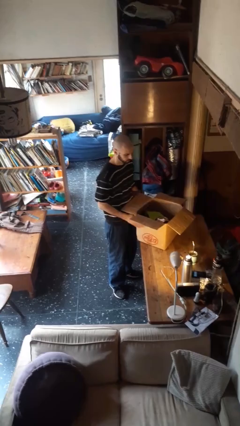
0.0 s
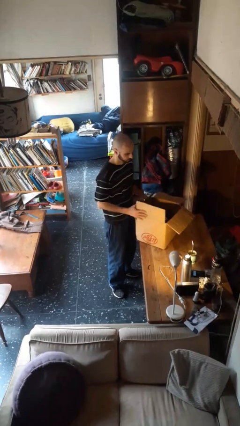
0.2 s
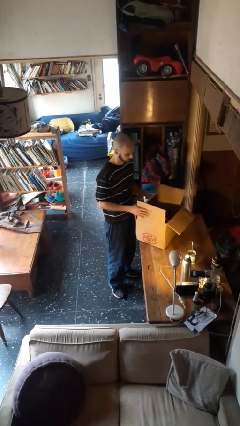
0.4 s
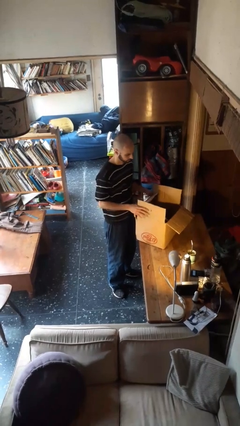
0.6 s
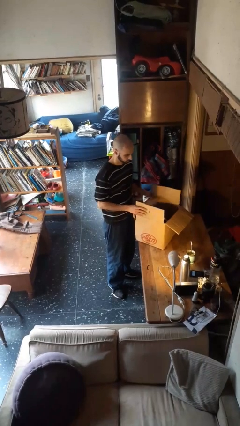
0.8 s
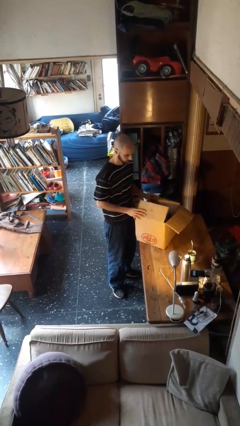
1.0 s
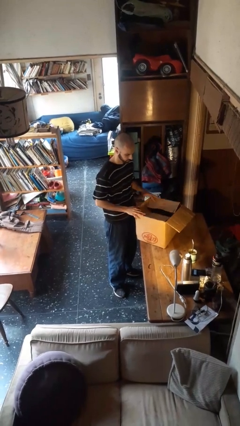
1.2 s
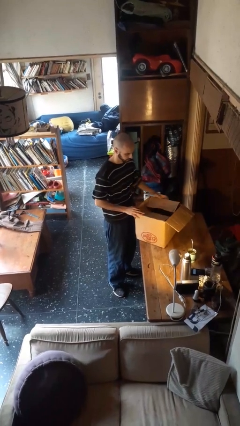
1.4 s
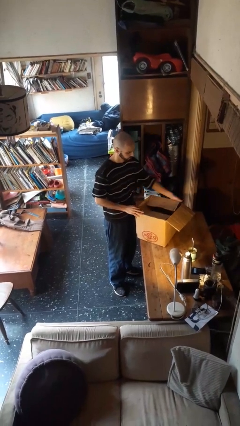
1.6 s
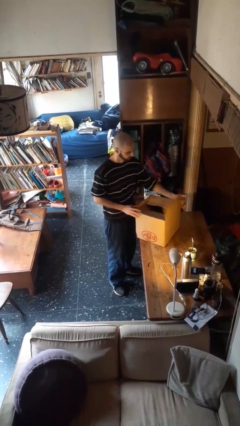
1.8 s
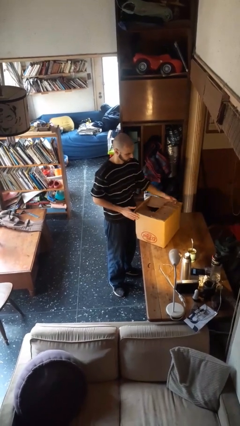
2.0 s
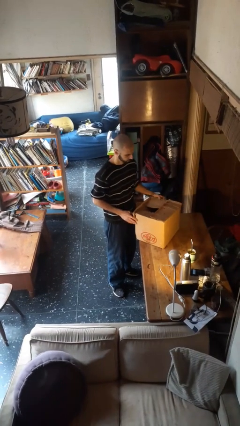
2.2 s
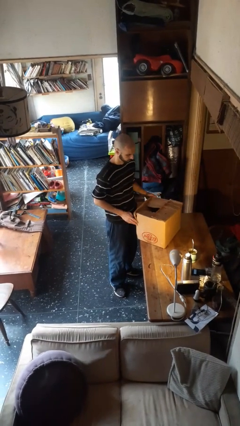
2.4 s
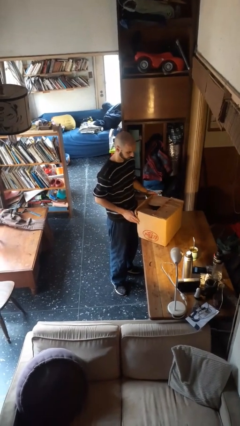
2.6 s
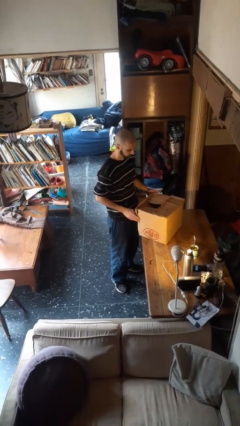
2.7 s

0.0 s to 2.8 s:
person closes box

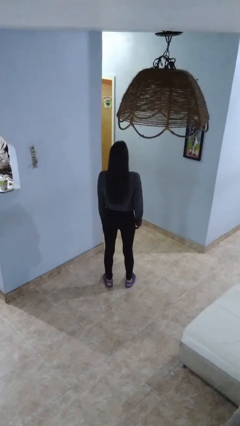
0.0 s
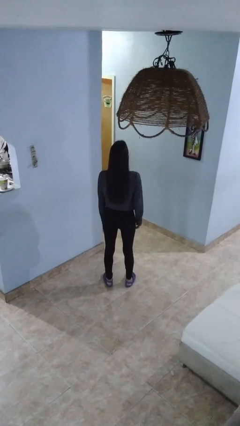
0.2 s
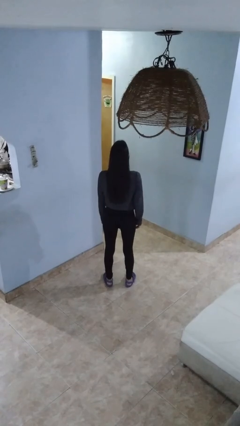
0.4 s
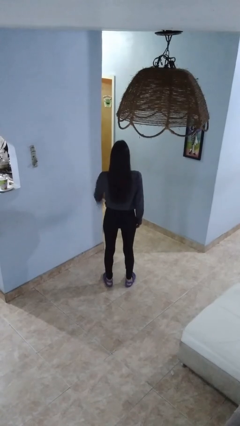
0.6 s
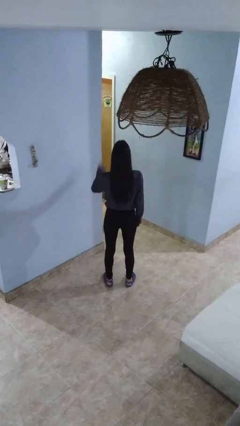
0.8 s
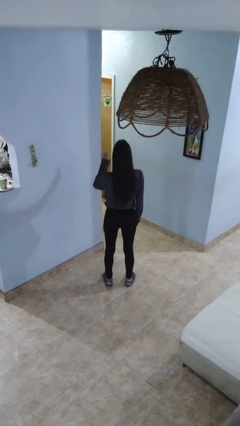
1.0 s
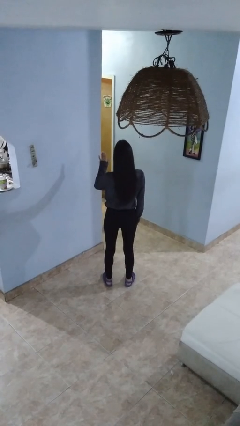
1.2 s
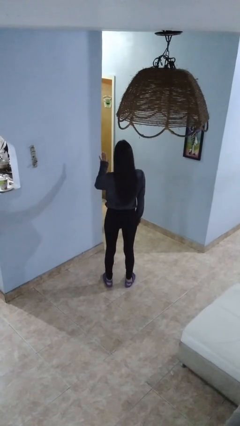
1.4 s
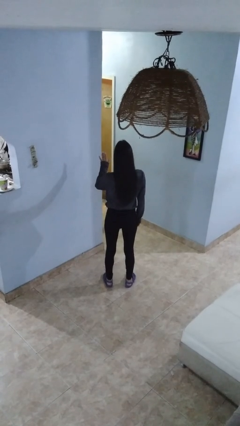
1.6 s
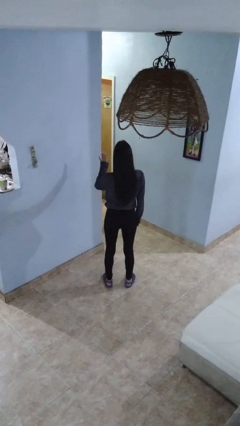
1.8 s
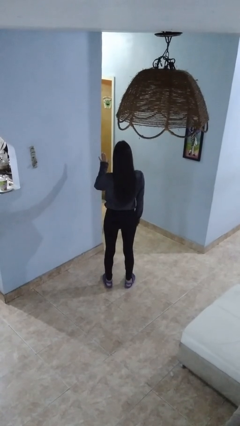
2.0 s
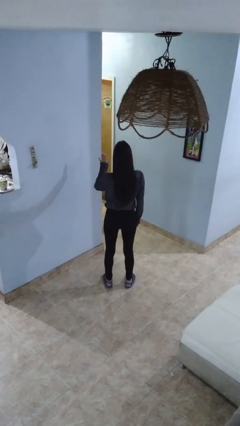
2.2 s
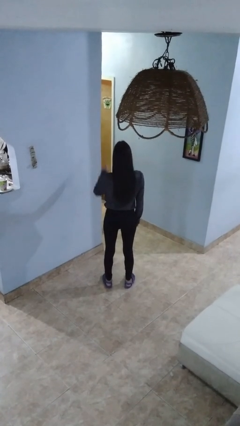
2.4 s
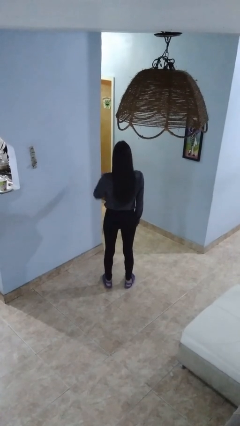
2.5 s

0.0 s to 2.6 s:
person gestures stop

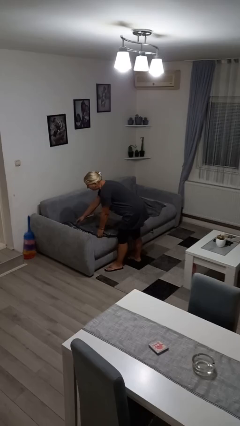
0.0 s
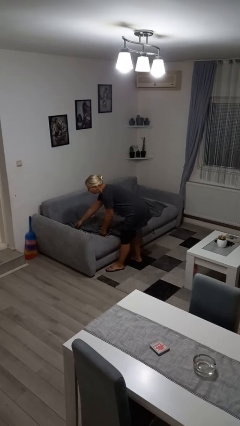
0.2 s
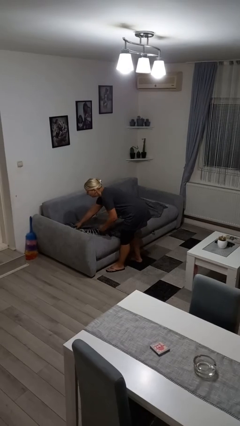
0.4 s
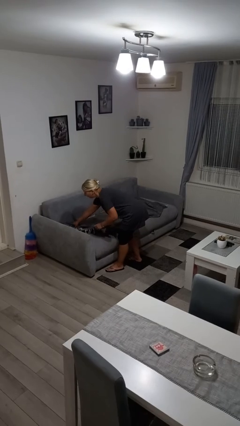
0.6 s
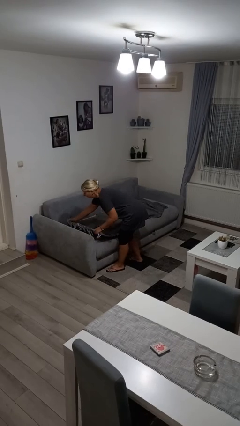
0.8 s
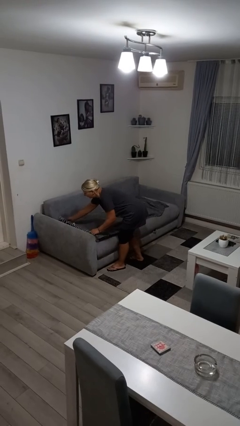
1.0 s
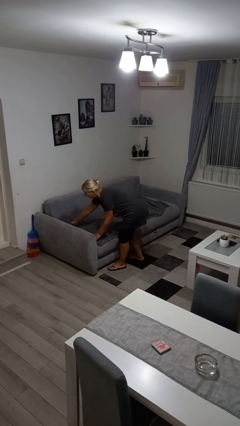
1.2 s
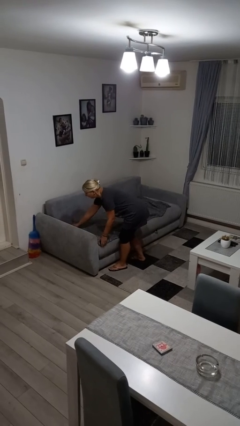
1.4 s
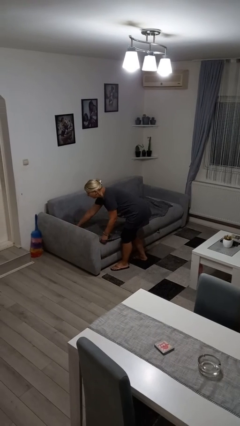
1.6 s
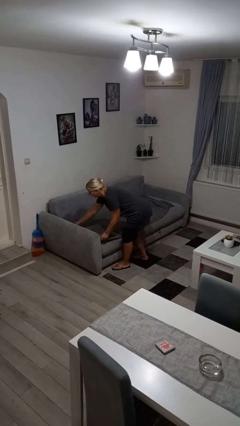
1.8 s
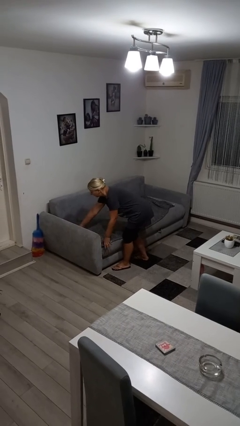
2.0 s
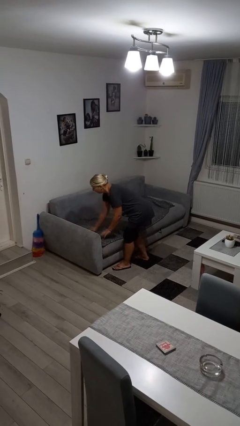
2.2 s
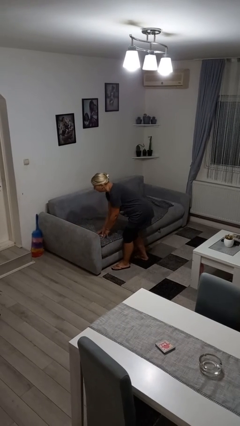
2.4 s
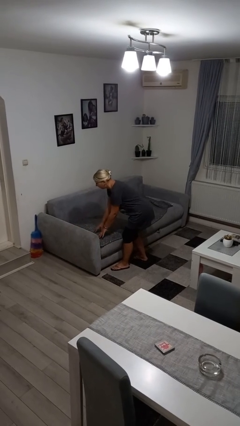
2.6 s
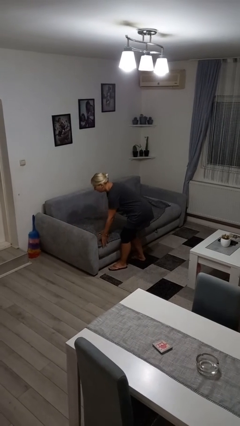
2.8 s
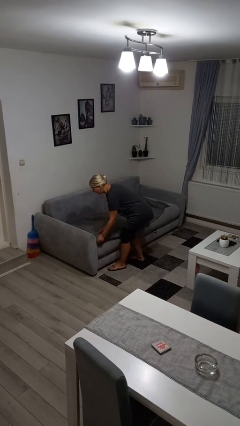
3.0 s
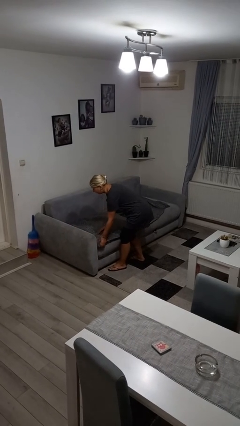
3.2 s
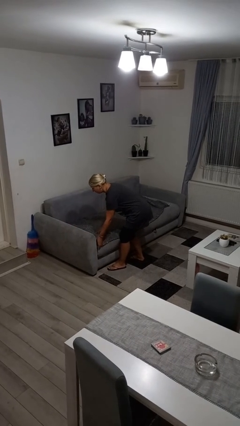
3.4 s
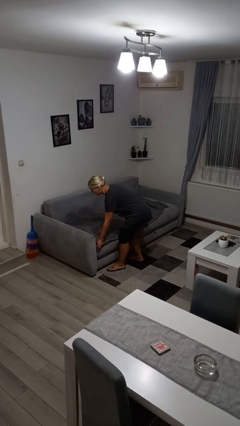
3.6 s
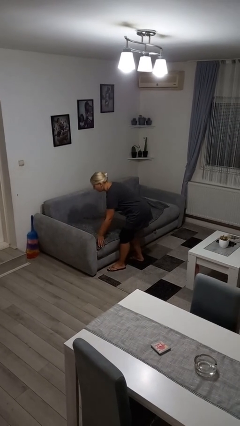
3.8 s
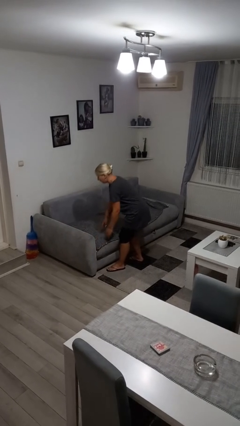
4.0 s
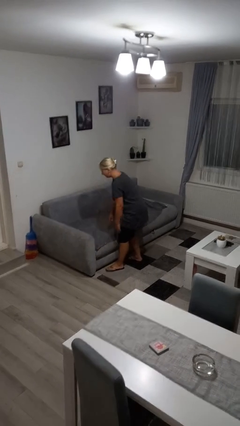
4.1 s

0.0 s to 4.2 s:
person makes bed

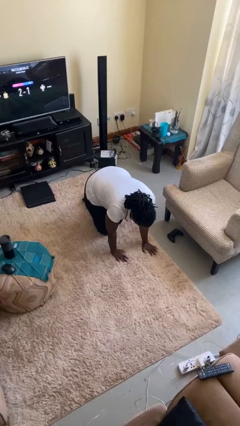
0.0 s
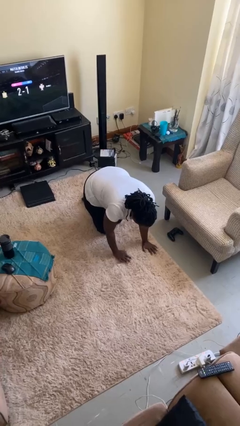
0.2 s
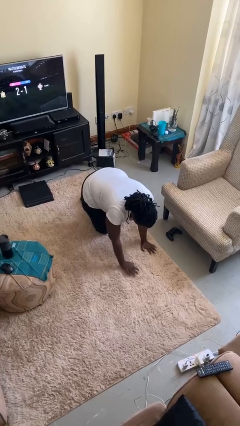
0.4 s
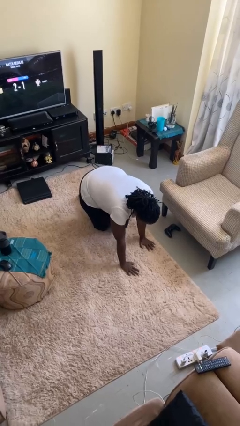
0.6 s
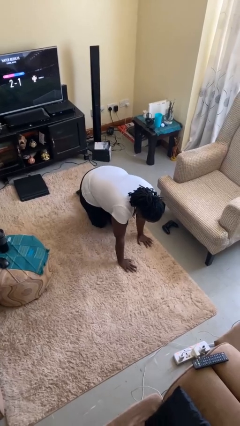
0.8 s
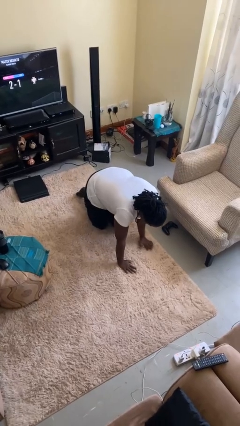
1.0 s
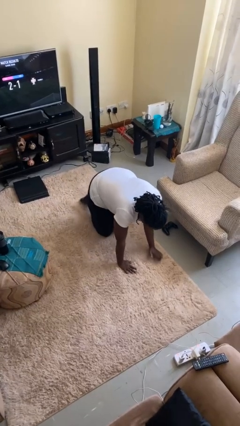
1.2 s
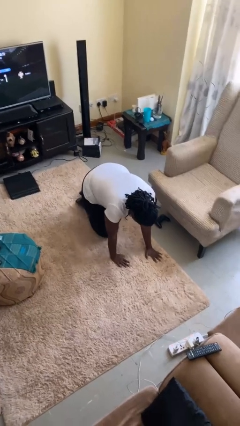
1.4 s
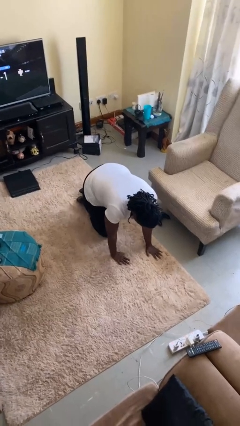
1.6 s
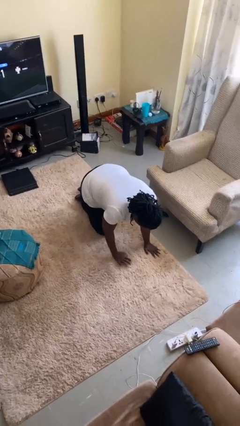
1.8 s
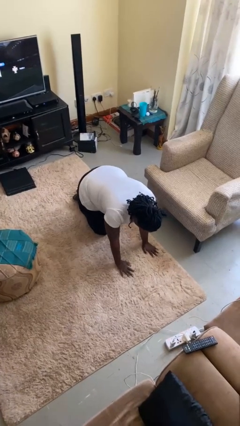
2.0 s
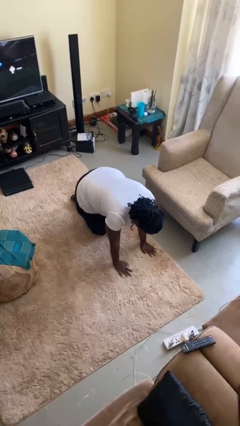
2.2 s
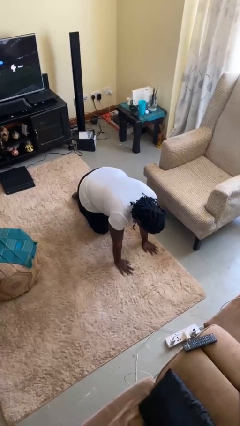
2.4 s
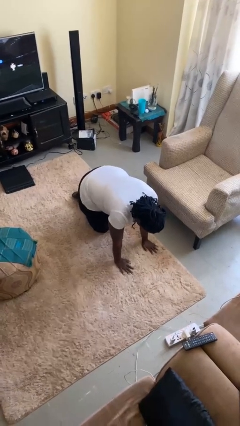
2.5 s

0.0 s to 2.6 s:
person crawls

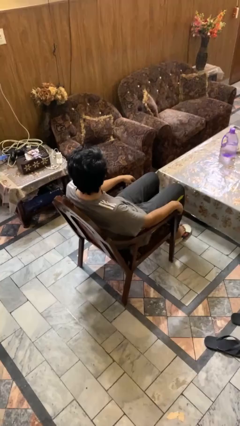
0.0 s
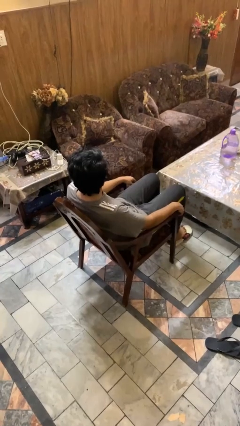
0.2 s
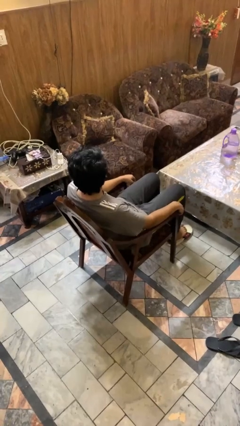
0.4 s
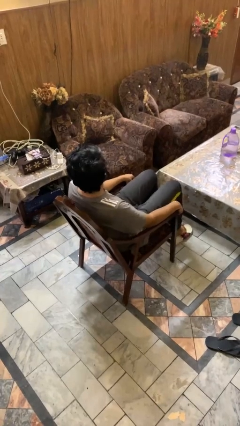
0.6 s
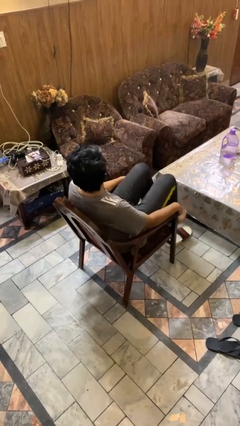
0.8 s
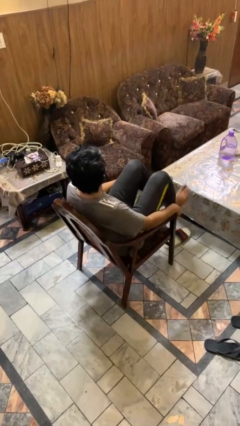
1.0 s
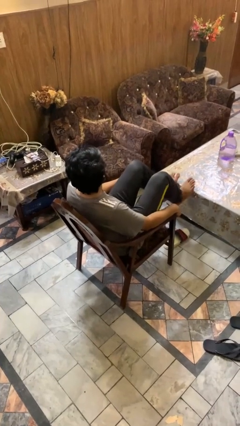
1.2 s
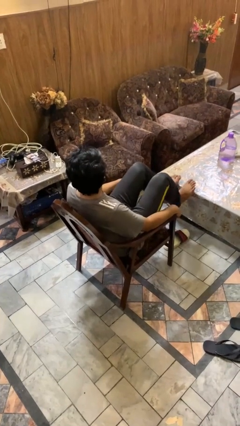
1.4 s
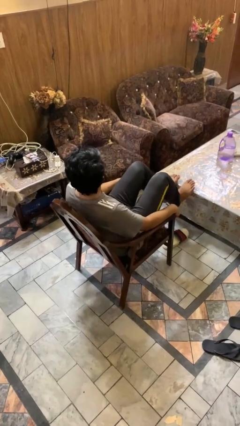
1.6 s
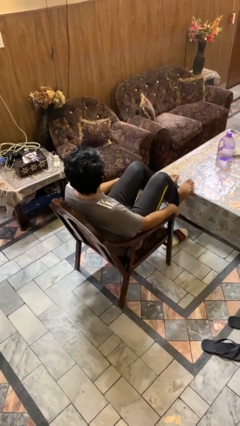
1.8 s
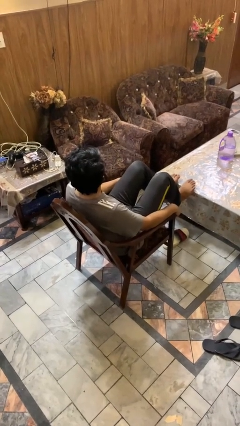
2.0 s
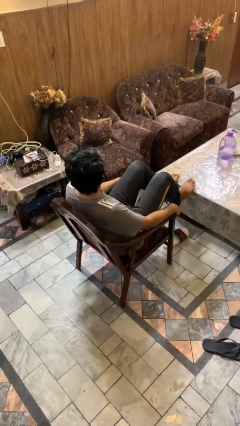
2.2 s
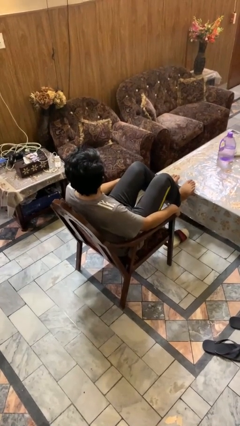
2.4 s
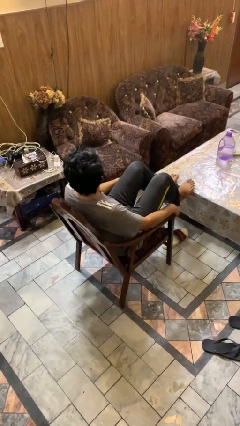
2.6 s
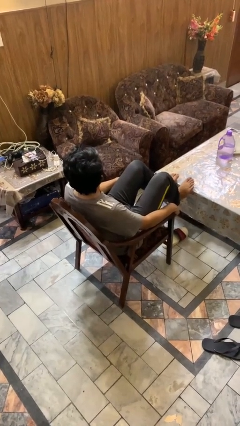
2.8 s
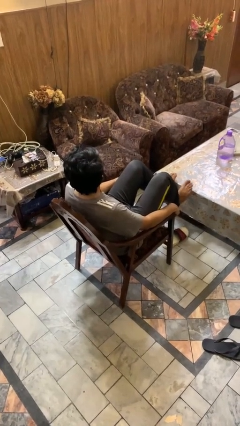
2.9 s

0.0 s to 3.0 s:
person puts feet up

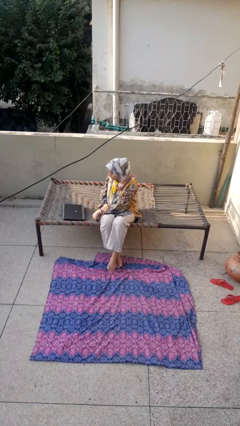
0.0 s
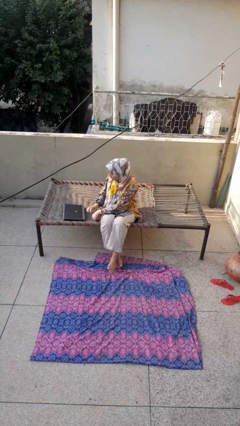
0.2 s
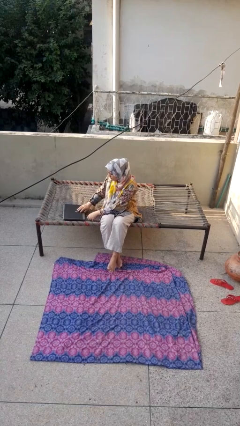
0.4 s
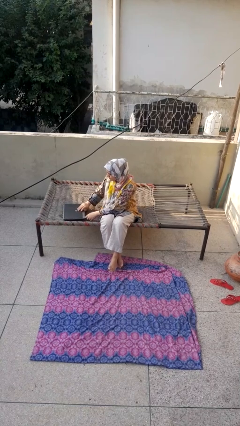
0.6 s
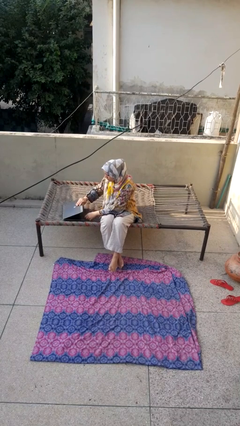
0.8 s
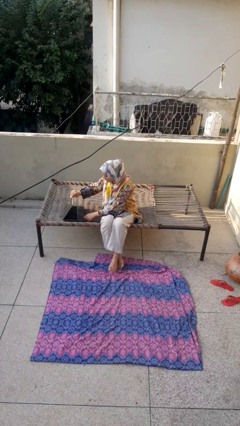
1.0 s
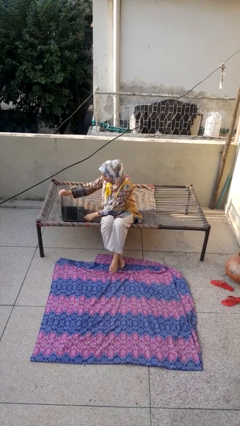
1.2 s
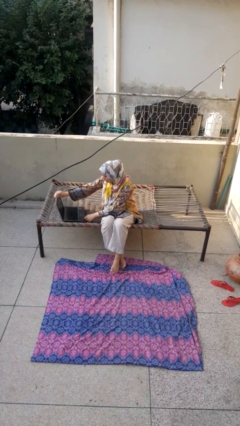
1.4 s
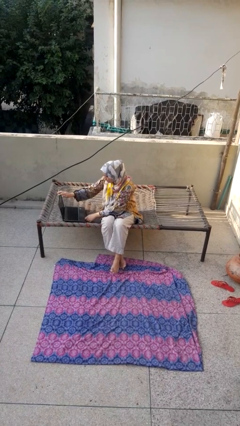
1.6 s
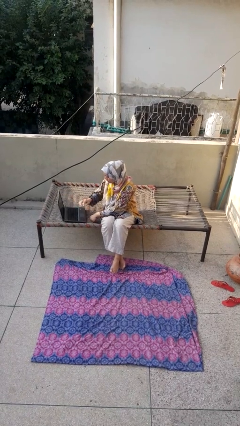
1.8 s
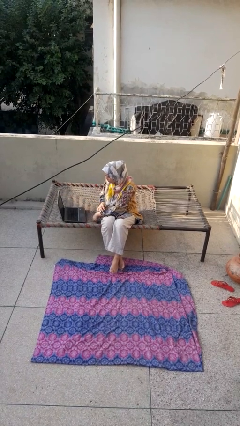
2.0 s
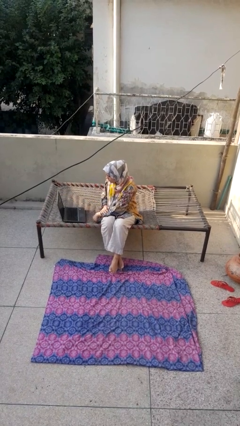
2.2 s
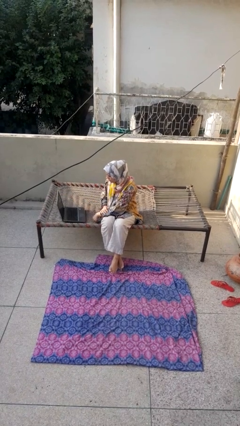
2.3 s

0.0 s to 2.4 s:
person opens laptop
